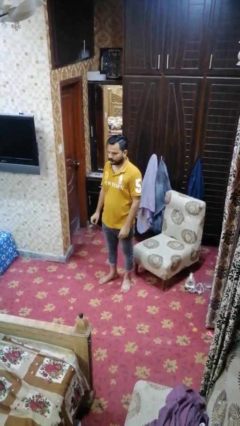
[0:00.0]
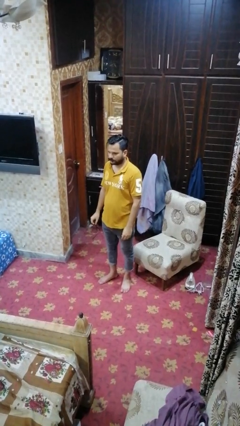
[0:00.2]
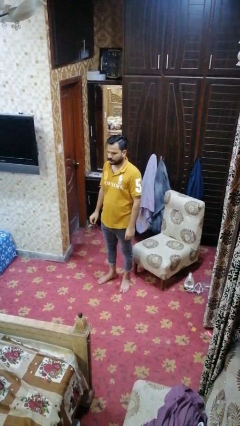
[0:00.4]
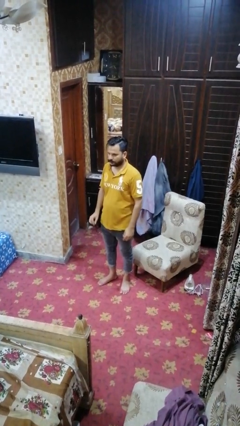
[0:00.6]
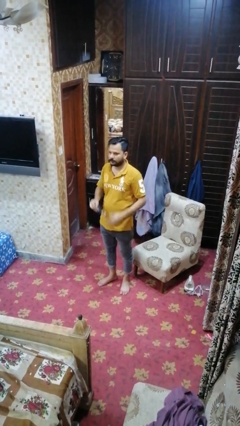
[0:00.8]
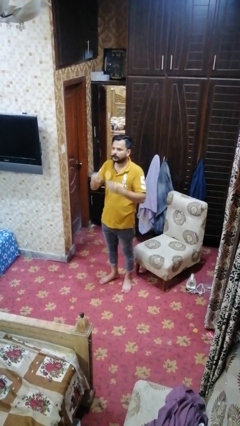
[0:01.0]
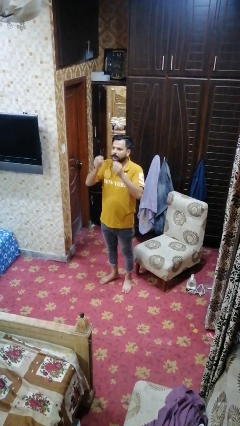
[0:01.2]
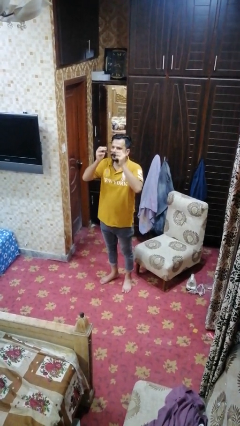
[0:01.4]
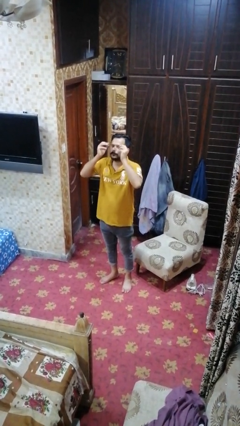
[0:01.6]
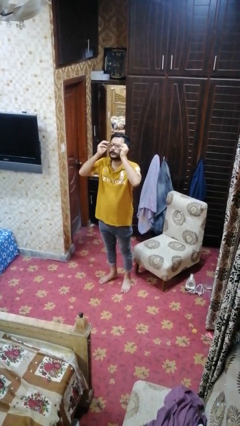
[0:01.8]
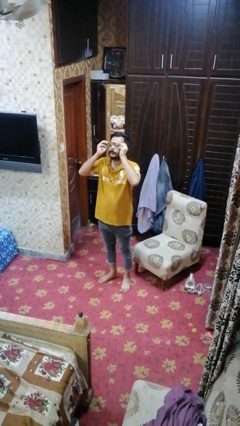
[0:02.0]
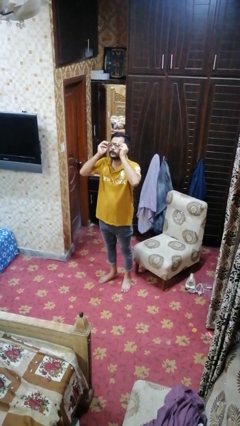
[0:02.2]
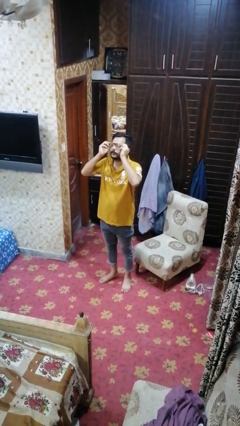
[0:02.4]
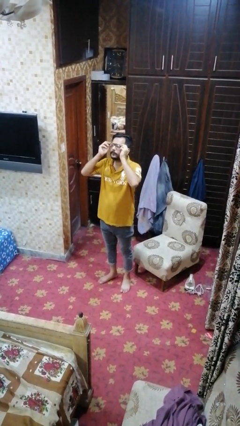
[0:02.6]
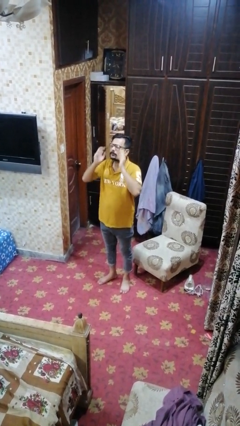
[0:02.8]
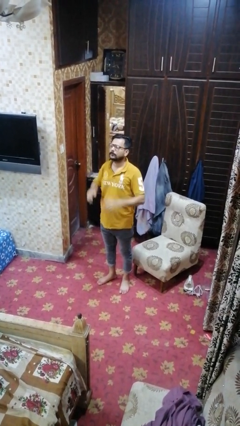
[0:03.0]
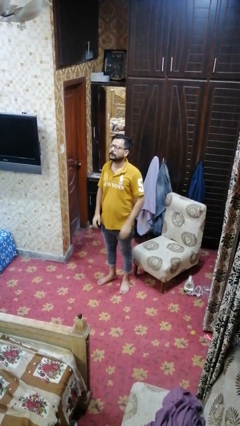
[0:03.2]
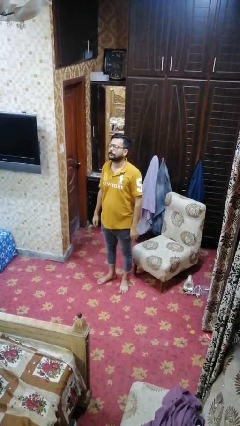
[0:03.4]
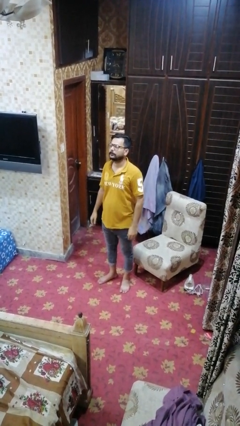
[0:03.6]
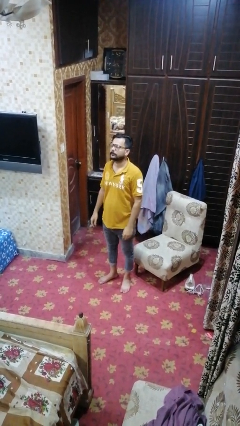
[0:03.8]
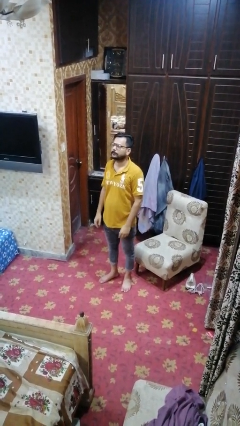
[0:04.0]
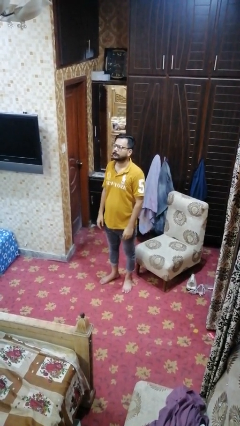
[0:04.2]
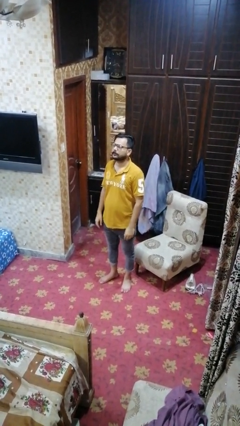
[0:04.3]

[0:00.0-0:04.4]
person puts on glasses

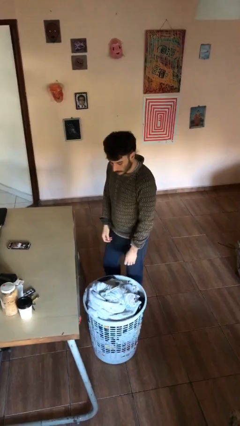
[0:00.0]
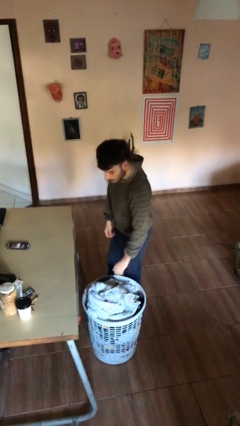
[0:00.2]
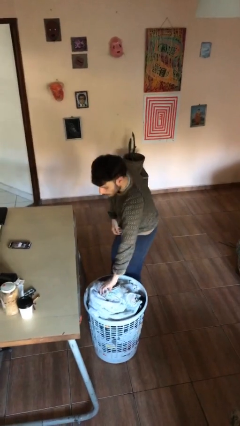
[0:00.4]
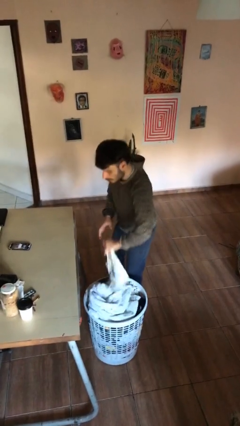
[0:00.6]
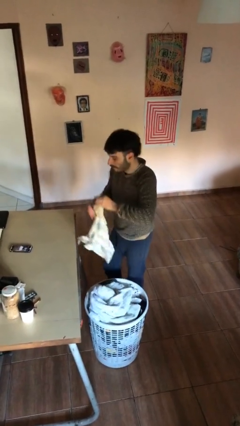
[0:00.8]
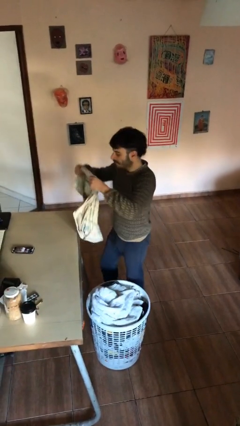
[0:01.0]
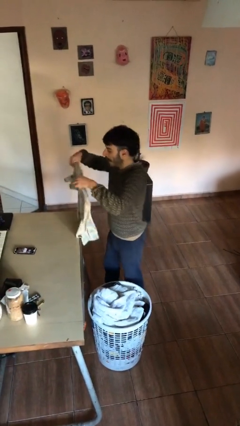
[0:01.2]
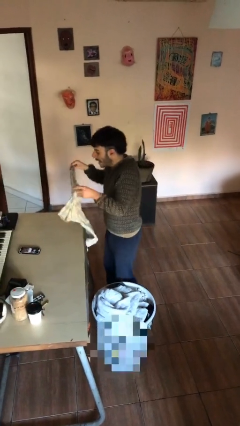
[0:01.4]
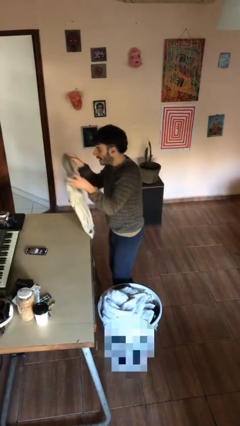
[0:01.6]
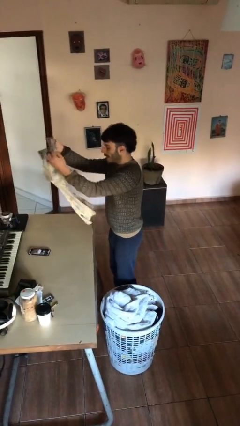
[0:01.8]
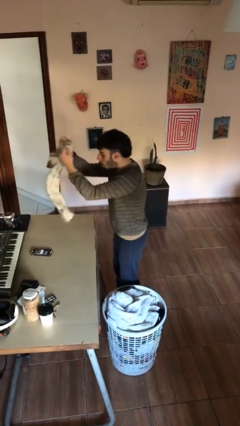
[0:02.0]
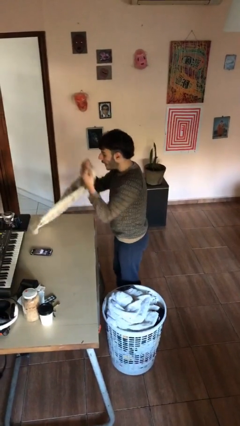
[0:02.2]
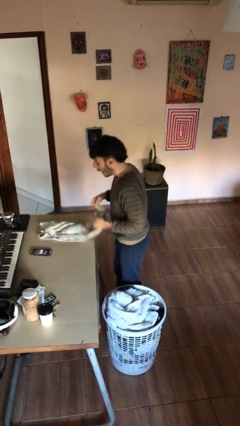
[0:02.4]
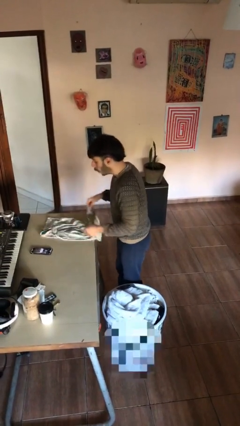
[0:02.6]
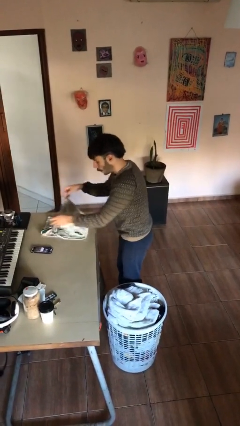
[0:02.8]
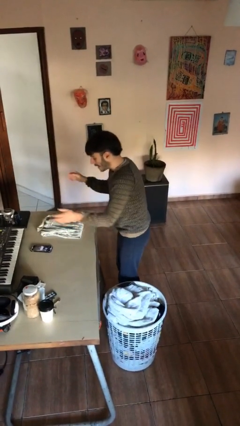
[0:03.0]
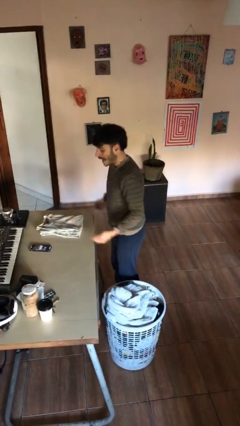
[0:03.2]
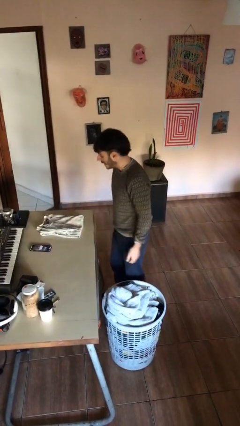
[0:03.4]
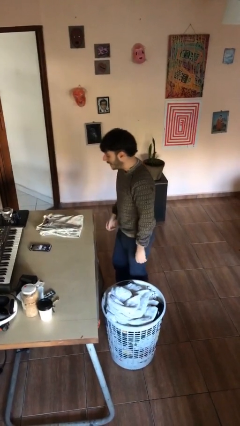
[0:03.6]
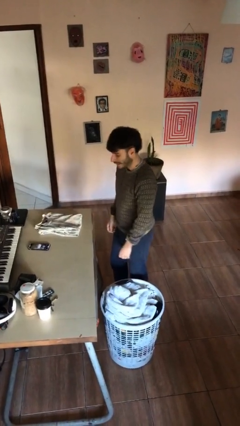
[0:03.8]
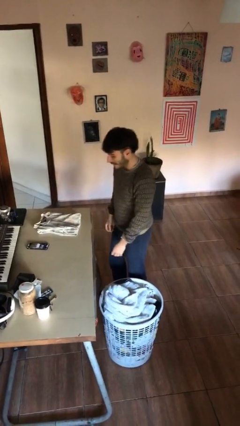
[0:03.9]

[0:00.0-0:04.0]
person folds shirt

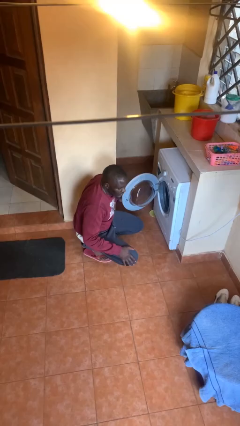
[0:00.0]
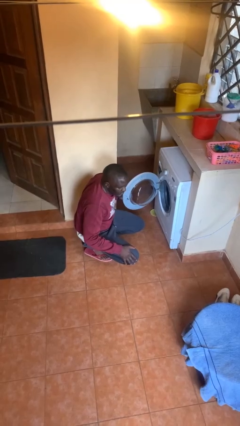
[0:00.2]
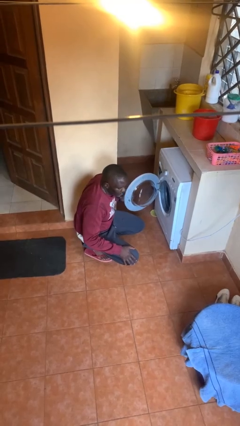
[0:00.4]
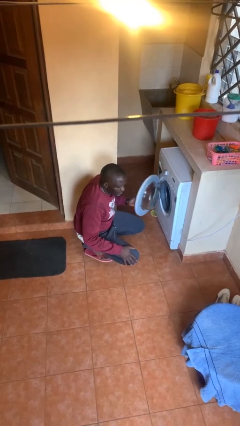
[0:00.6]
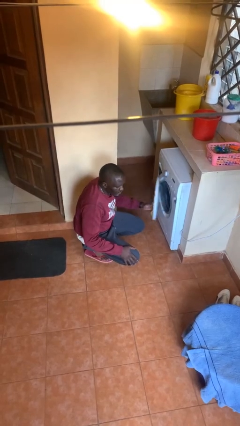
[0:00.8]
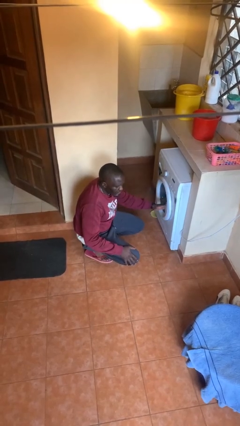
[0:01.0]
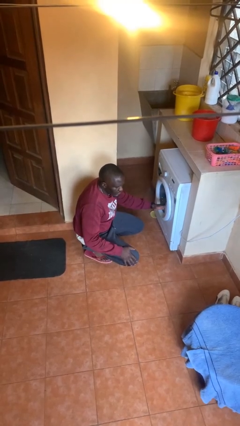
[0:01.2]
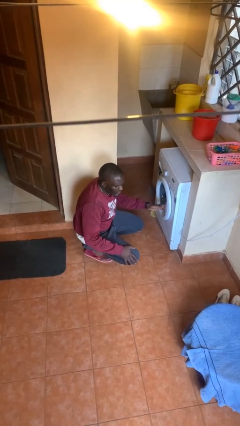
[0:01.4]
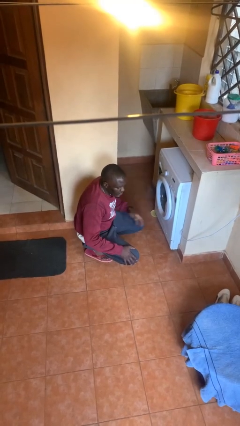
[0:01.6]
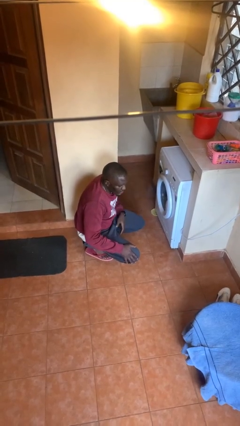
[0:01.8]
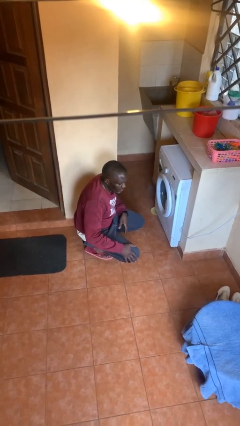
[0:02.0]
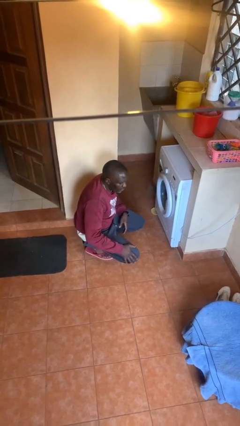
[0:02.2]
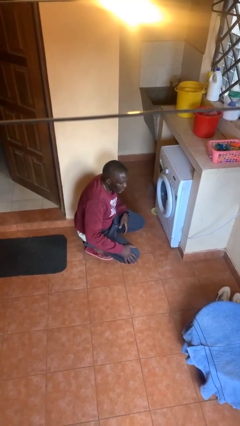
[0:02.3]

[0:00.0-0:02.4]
person closes clothes washer

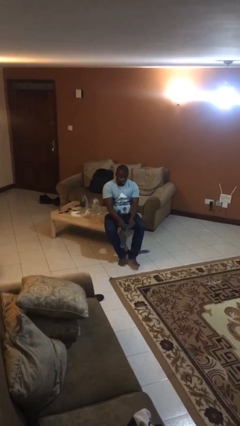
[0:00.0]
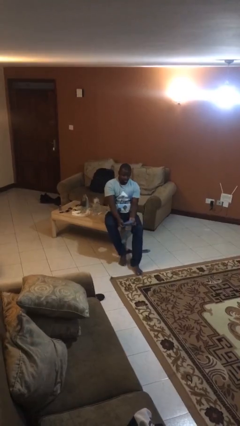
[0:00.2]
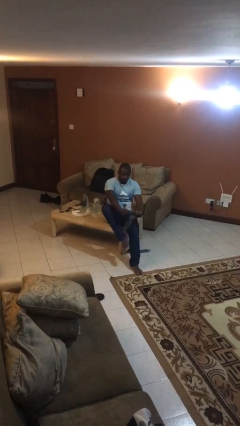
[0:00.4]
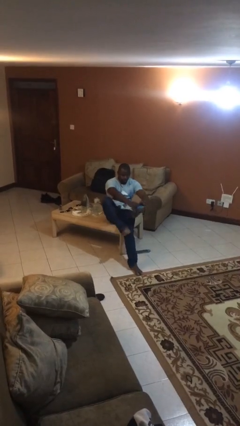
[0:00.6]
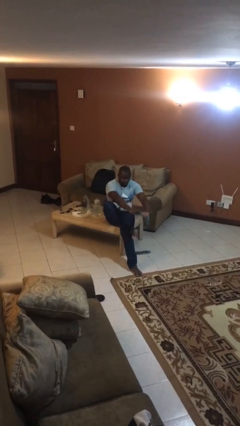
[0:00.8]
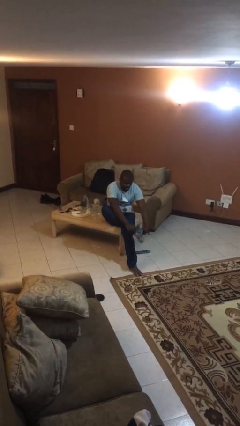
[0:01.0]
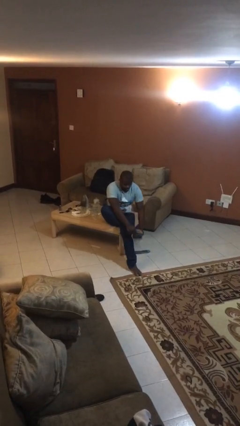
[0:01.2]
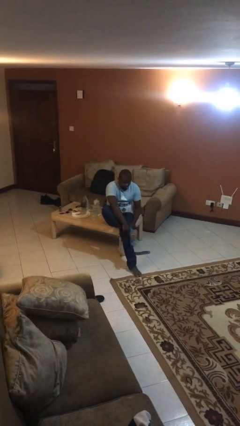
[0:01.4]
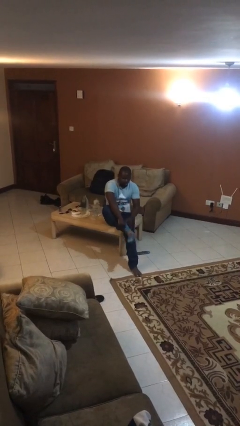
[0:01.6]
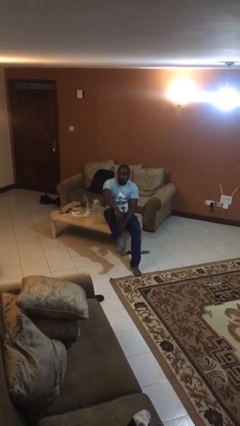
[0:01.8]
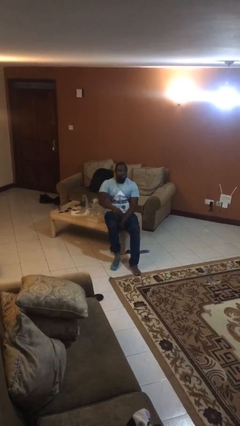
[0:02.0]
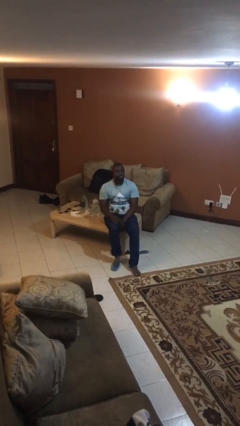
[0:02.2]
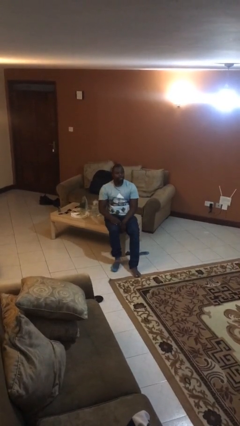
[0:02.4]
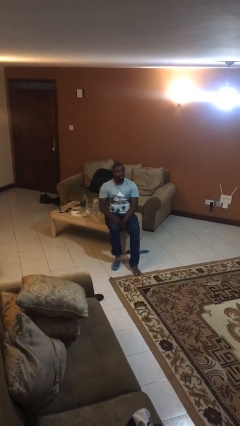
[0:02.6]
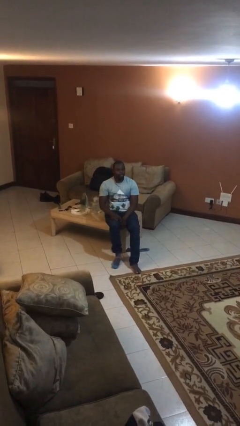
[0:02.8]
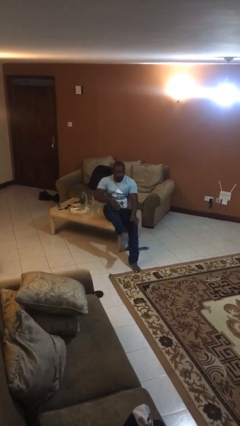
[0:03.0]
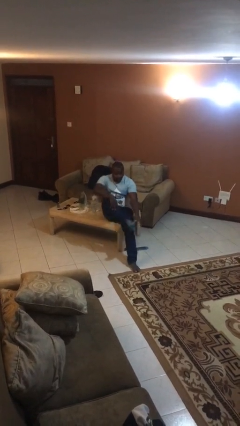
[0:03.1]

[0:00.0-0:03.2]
person puts on socks

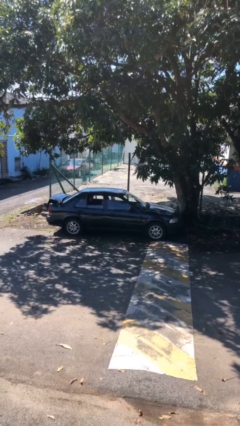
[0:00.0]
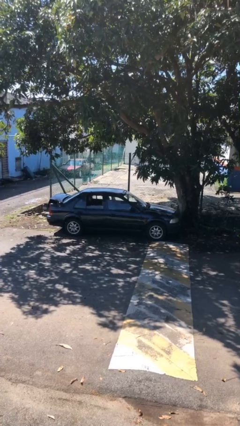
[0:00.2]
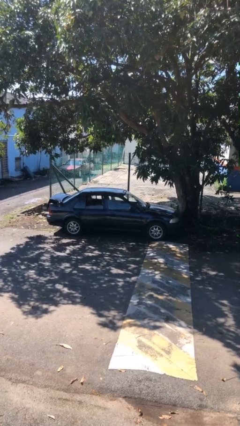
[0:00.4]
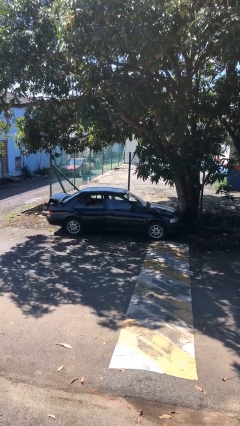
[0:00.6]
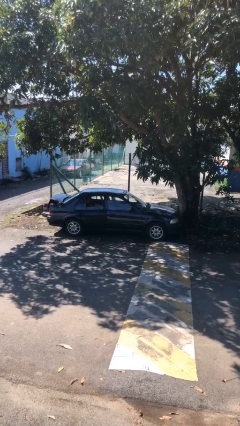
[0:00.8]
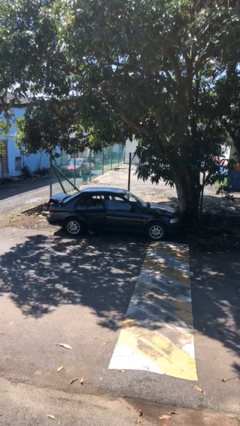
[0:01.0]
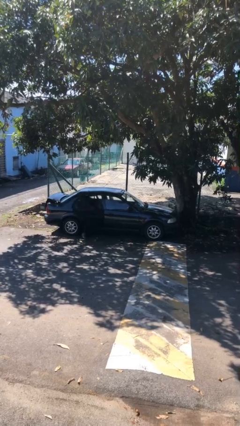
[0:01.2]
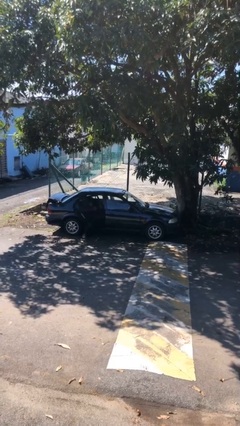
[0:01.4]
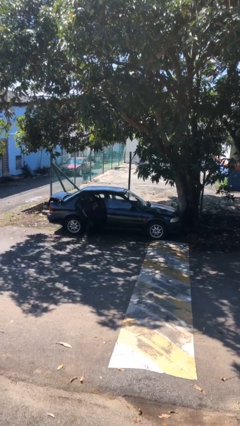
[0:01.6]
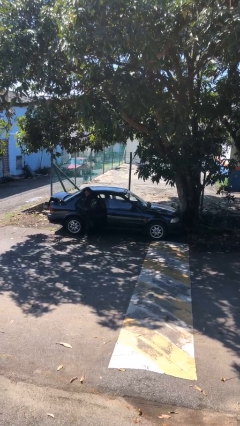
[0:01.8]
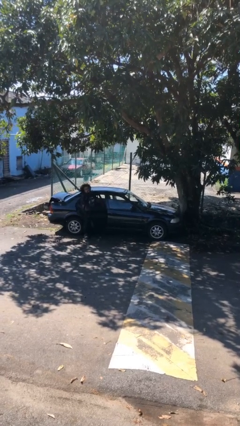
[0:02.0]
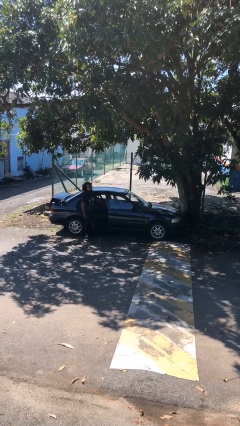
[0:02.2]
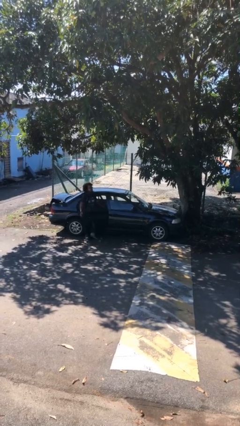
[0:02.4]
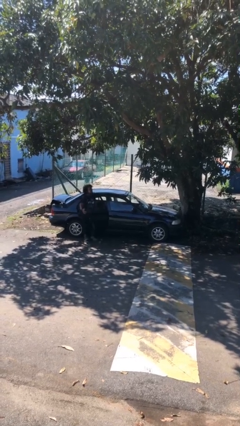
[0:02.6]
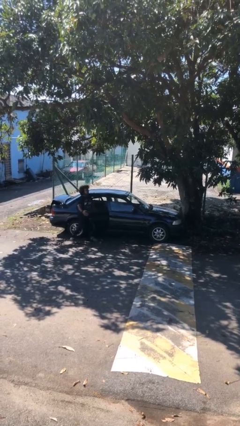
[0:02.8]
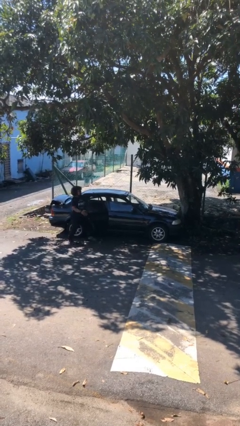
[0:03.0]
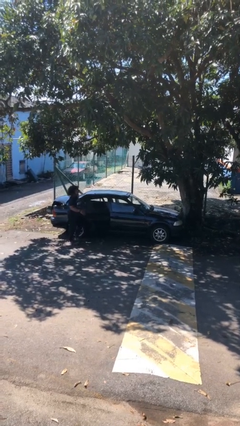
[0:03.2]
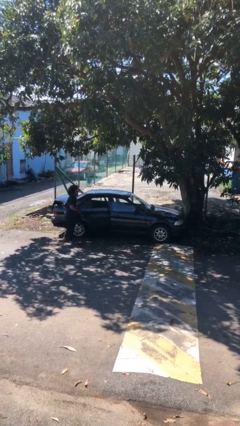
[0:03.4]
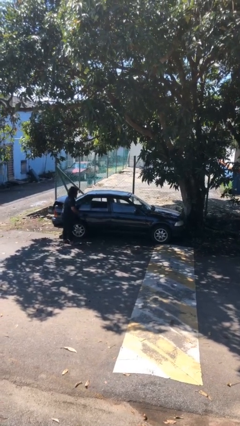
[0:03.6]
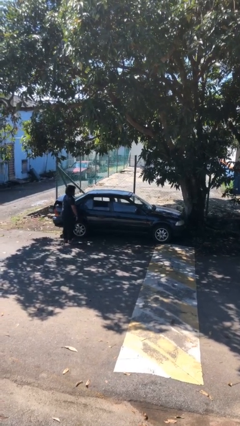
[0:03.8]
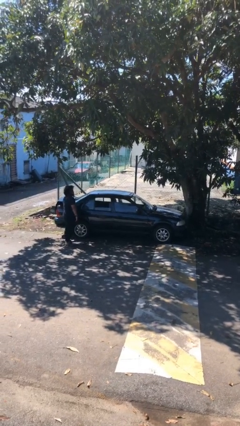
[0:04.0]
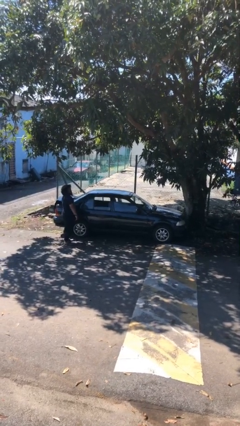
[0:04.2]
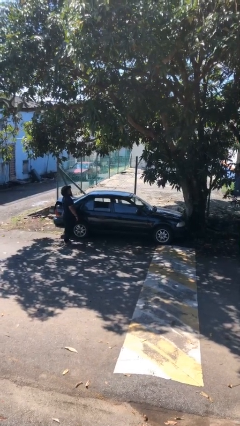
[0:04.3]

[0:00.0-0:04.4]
car drops off person
